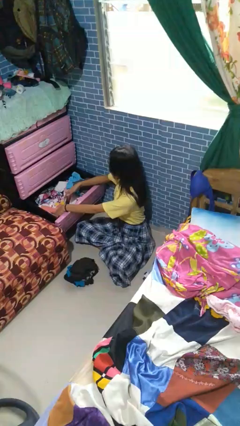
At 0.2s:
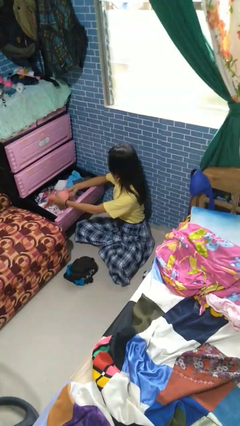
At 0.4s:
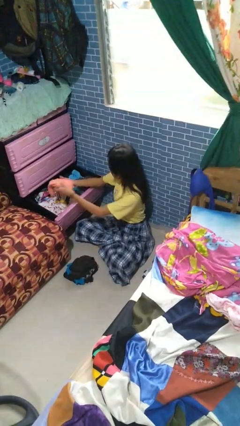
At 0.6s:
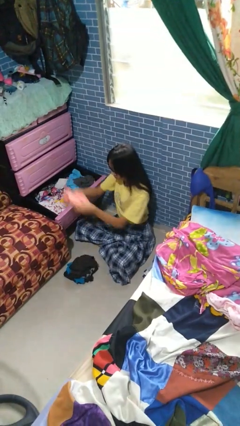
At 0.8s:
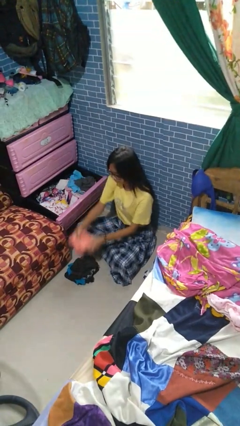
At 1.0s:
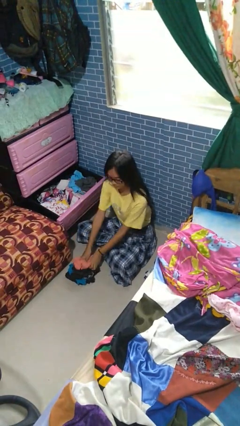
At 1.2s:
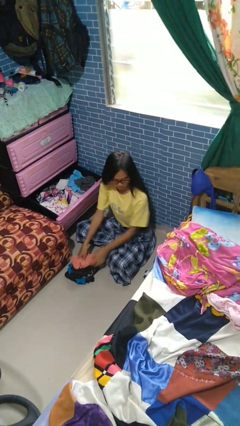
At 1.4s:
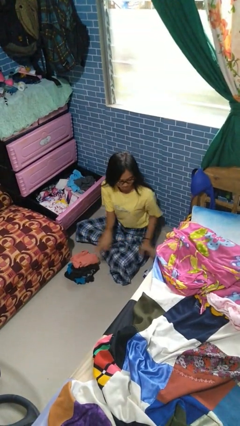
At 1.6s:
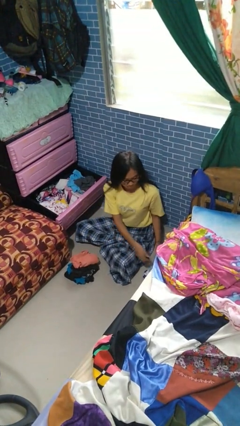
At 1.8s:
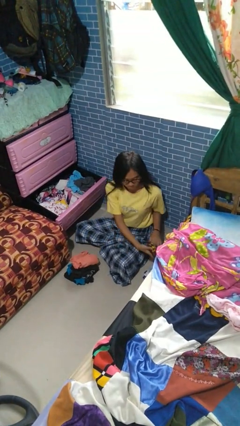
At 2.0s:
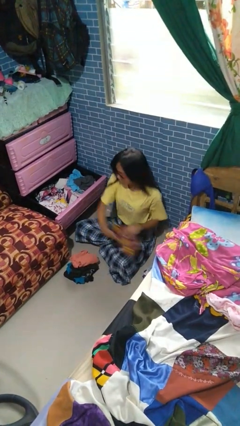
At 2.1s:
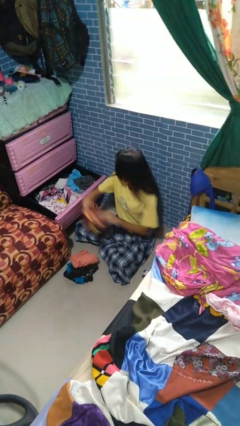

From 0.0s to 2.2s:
person takes clothes from dresser

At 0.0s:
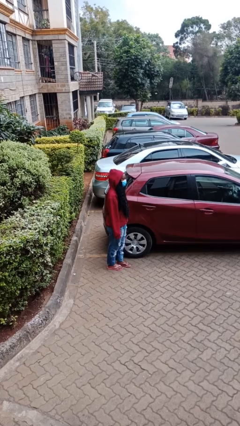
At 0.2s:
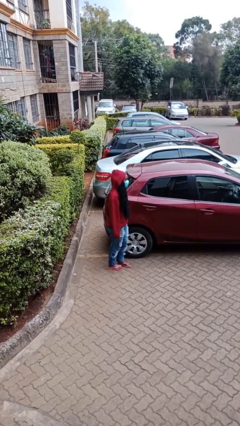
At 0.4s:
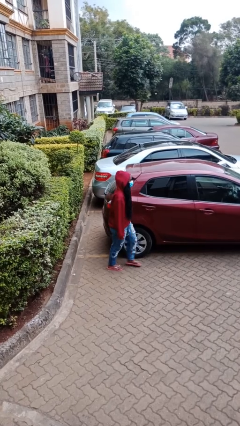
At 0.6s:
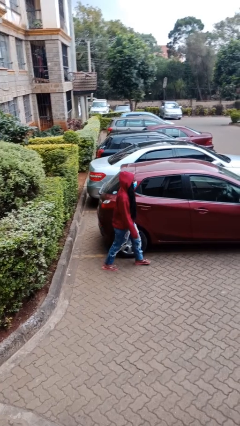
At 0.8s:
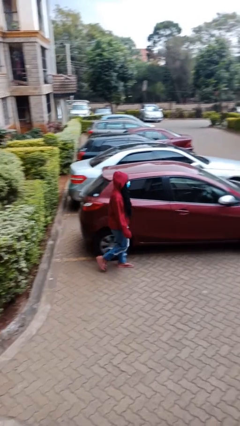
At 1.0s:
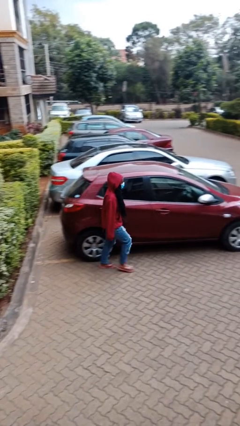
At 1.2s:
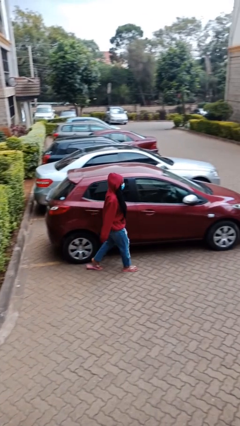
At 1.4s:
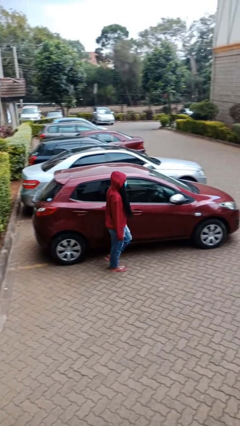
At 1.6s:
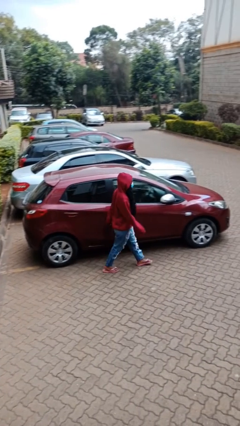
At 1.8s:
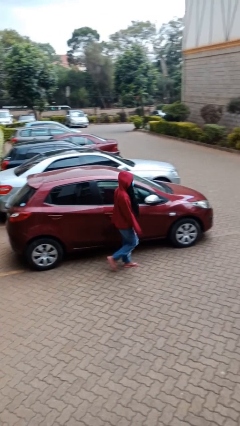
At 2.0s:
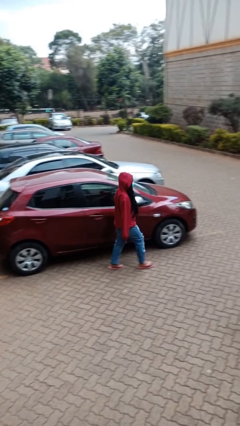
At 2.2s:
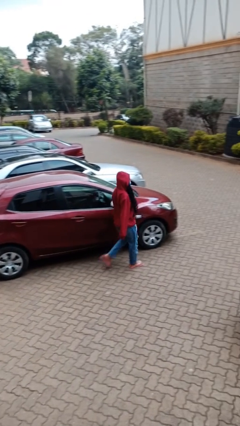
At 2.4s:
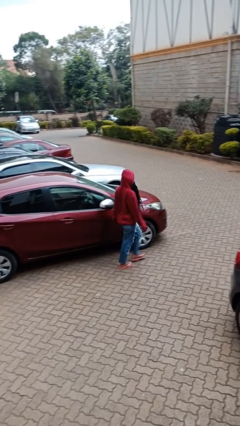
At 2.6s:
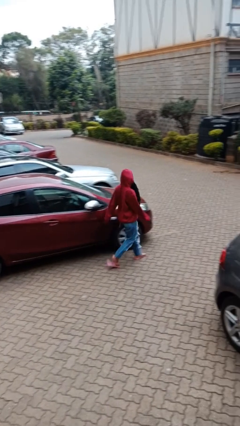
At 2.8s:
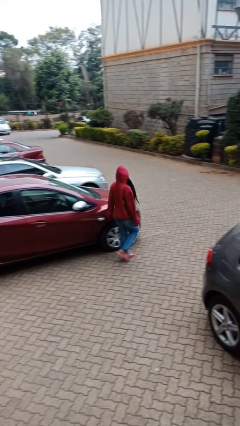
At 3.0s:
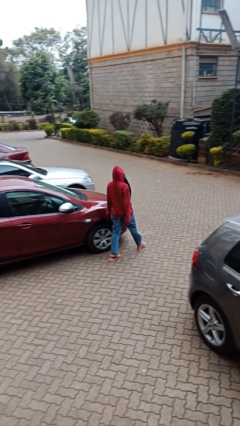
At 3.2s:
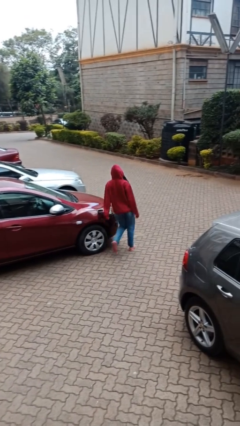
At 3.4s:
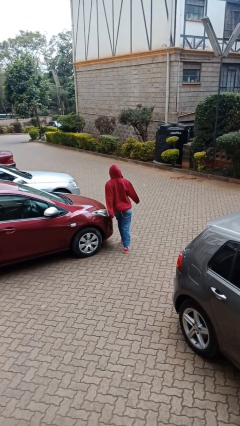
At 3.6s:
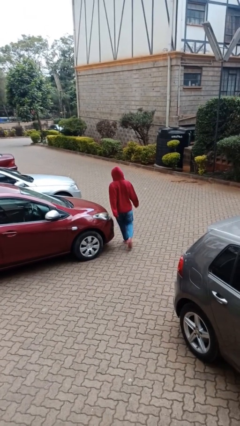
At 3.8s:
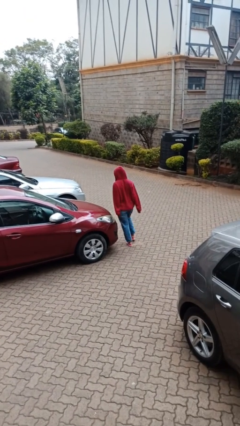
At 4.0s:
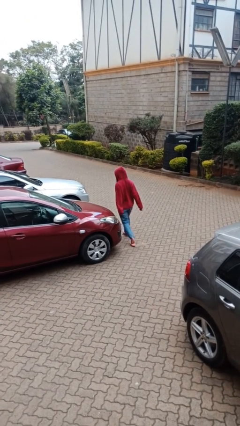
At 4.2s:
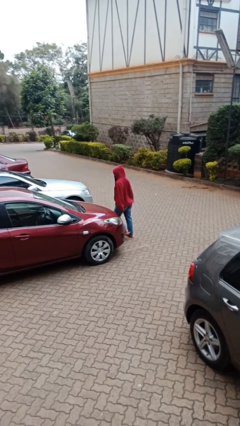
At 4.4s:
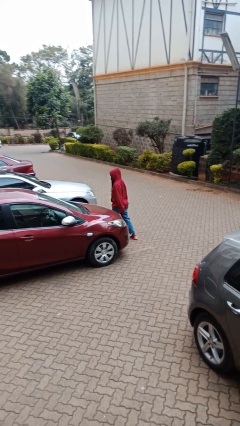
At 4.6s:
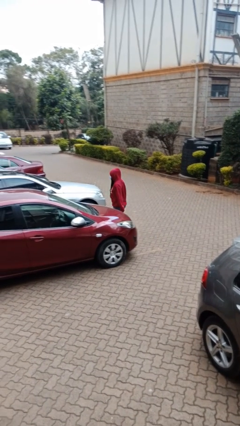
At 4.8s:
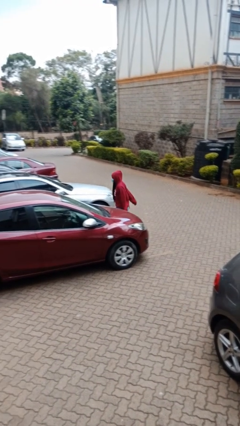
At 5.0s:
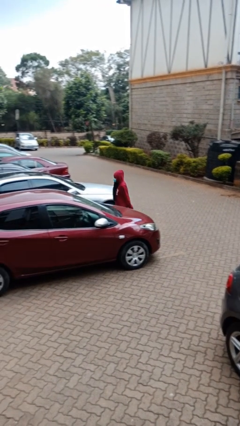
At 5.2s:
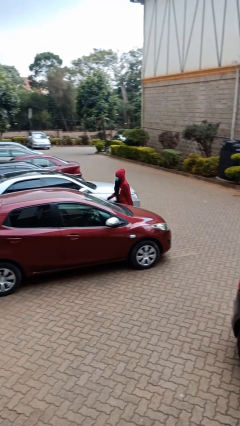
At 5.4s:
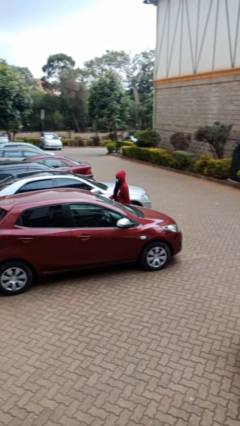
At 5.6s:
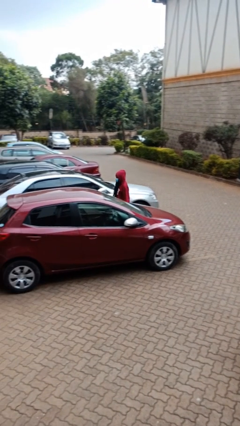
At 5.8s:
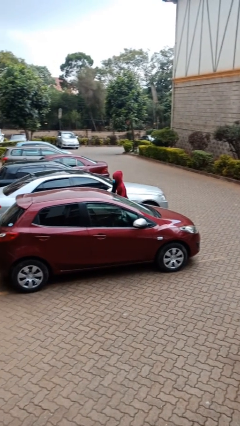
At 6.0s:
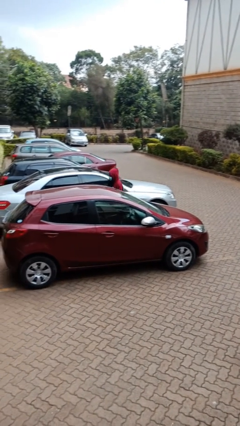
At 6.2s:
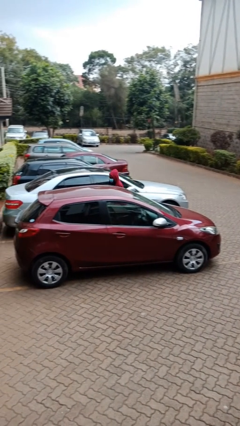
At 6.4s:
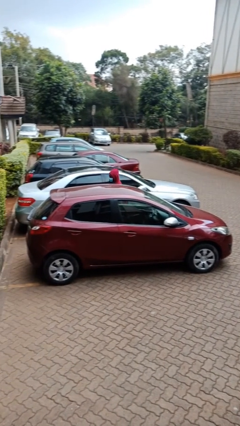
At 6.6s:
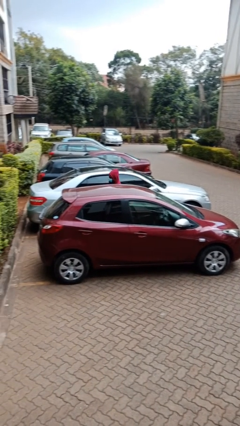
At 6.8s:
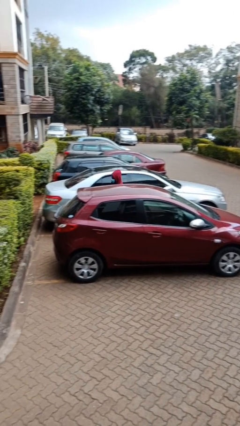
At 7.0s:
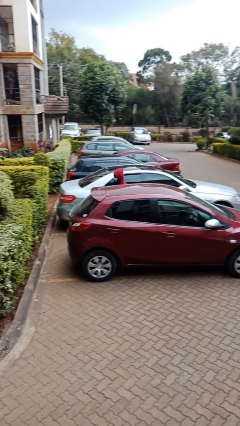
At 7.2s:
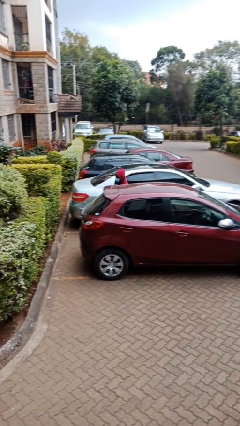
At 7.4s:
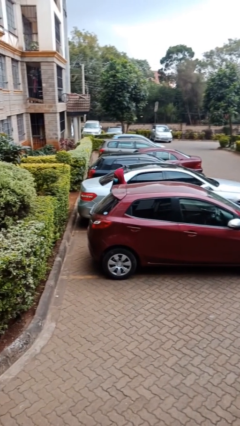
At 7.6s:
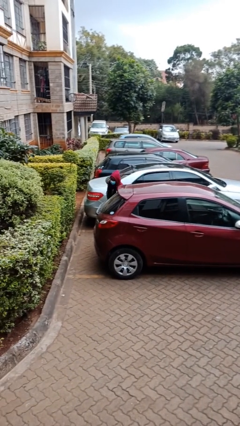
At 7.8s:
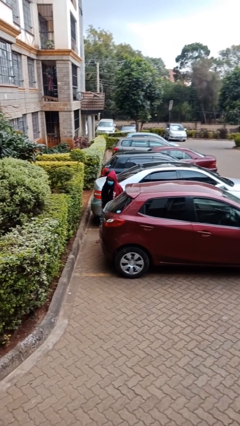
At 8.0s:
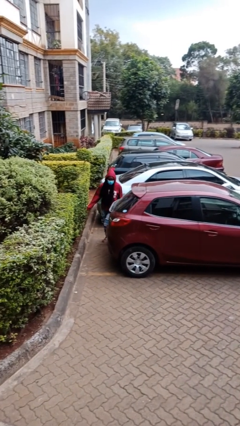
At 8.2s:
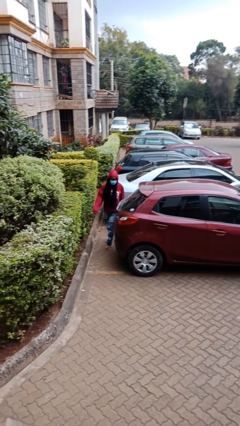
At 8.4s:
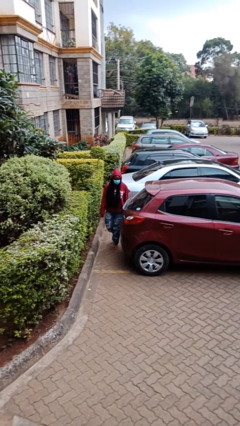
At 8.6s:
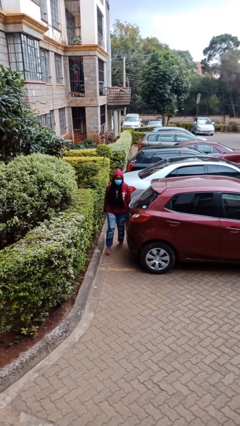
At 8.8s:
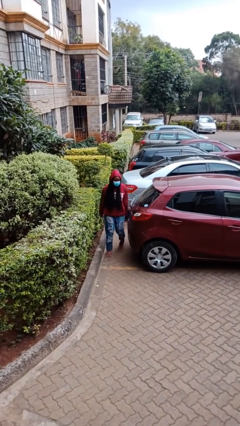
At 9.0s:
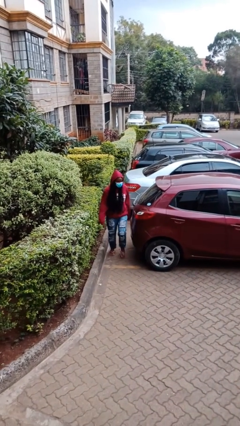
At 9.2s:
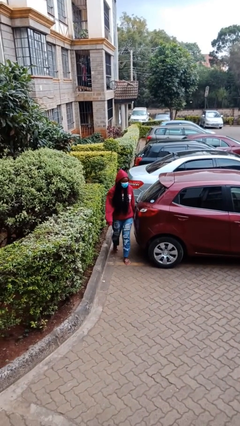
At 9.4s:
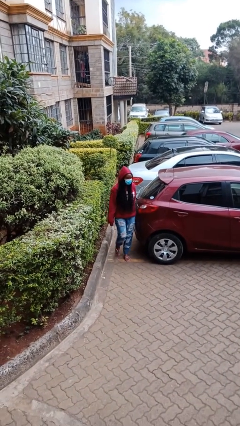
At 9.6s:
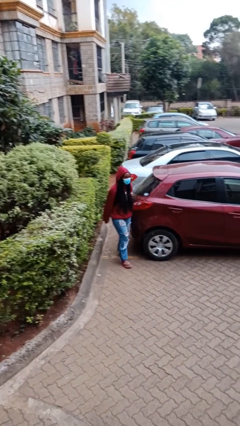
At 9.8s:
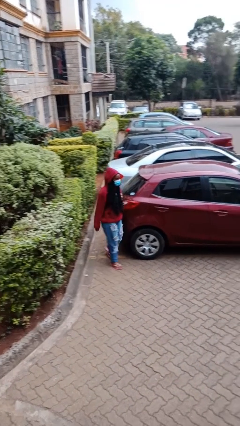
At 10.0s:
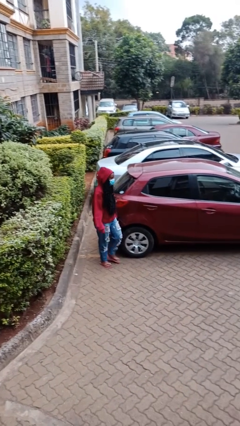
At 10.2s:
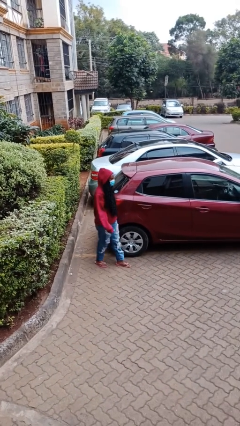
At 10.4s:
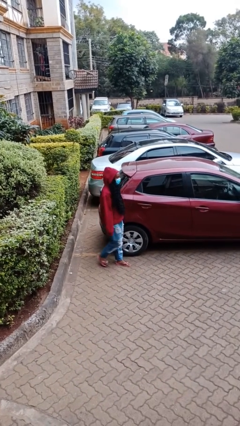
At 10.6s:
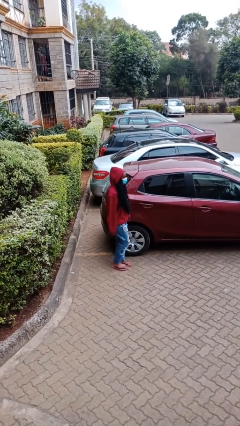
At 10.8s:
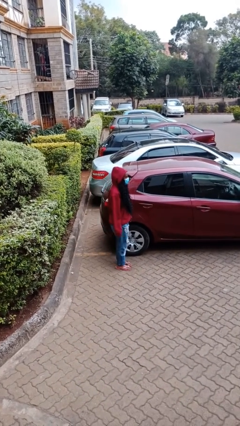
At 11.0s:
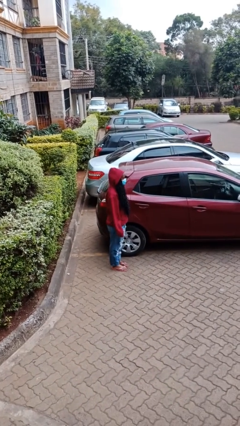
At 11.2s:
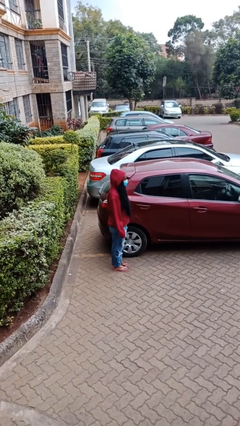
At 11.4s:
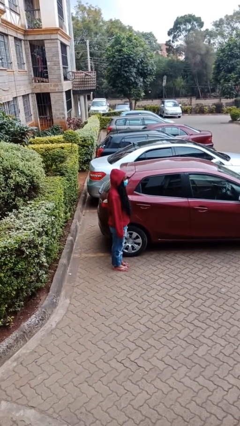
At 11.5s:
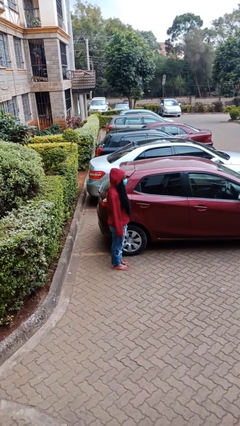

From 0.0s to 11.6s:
person walks around car

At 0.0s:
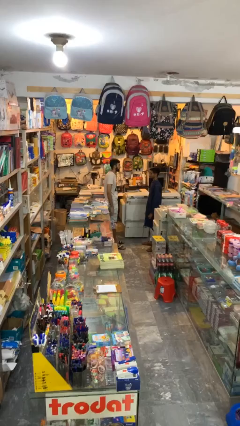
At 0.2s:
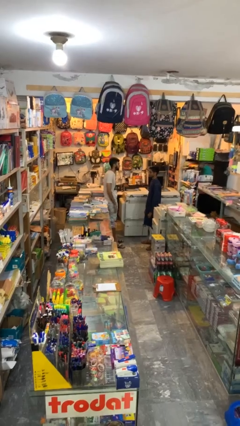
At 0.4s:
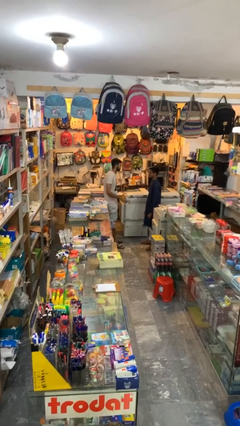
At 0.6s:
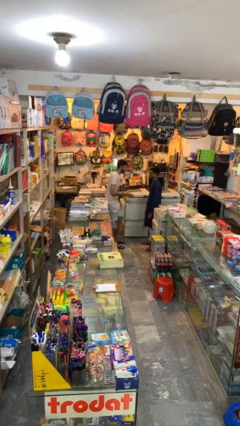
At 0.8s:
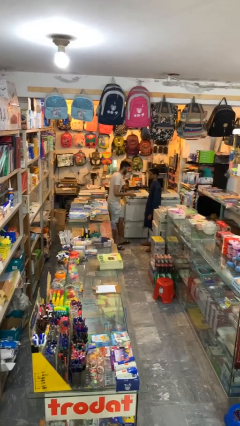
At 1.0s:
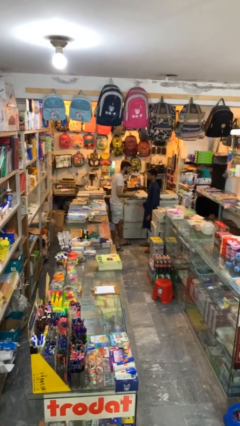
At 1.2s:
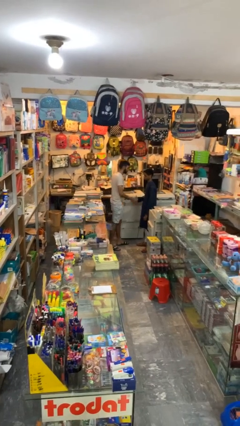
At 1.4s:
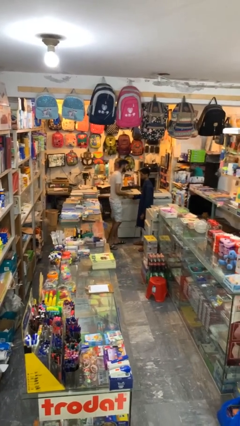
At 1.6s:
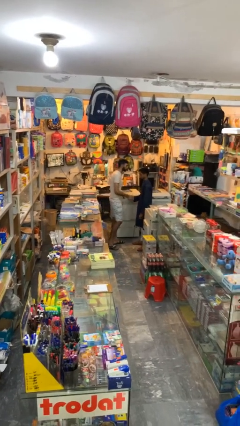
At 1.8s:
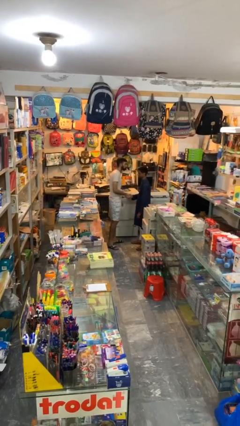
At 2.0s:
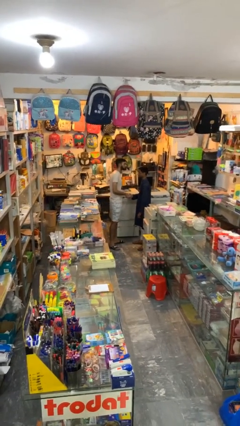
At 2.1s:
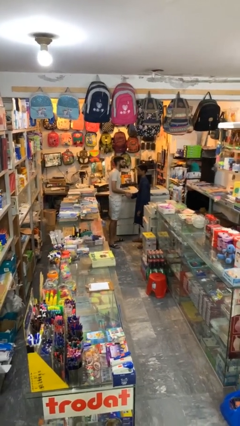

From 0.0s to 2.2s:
person shakes hand

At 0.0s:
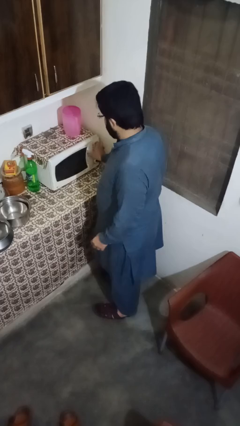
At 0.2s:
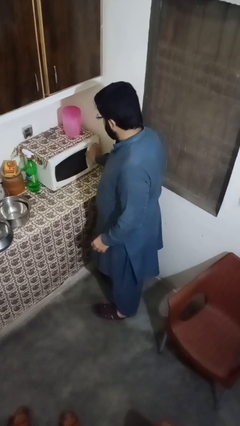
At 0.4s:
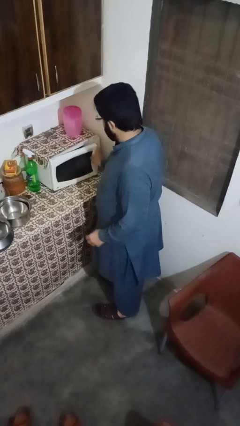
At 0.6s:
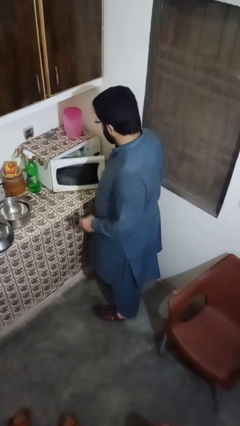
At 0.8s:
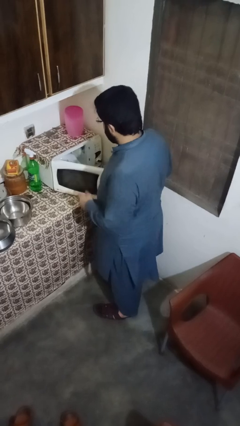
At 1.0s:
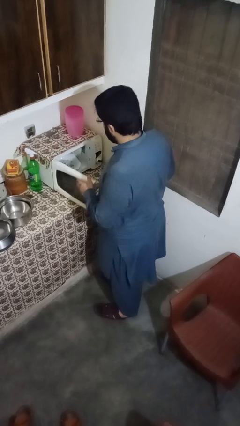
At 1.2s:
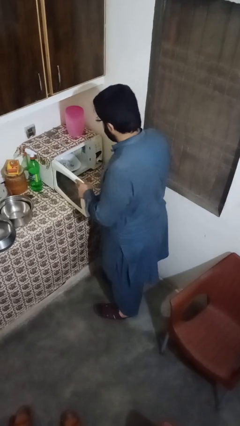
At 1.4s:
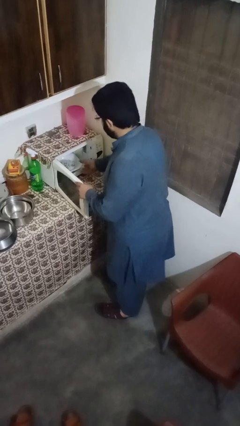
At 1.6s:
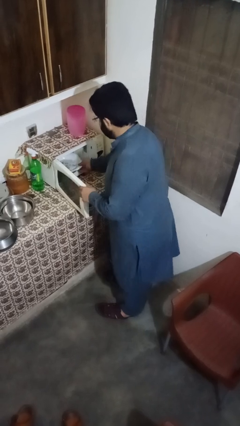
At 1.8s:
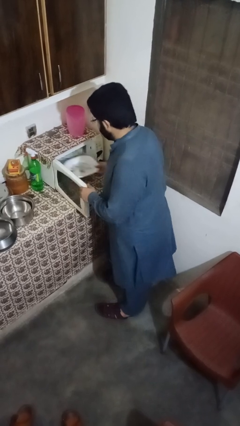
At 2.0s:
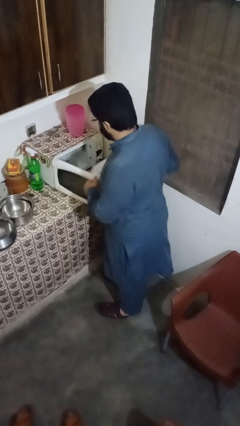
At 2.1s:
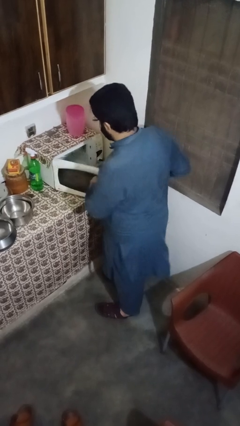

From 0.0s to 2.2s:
person takes object from microwave
